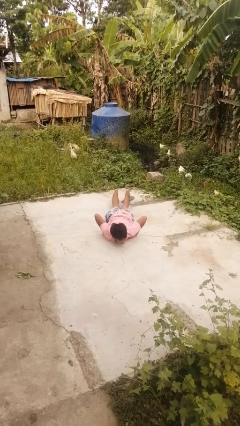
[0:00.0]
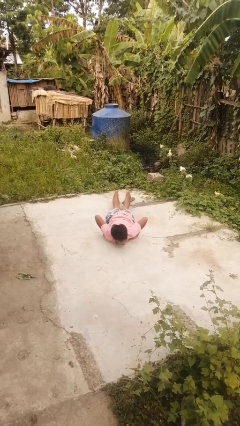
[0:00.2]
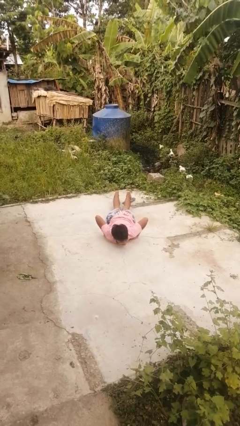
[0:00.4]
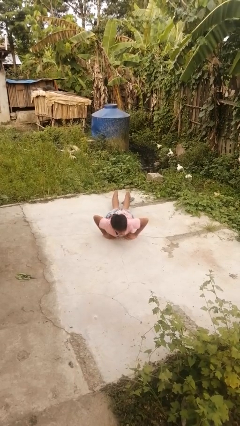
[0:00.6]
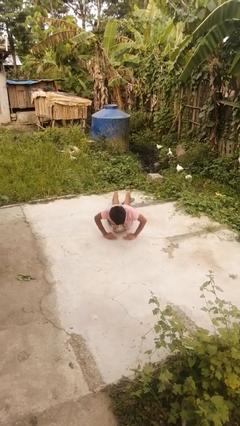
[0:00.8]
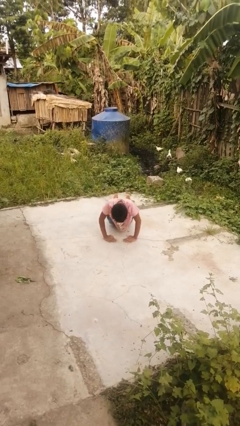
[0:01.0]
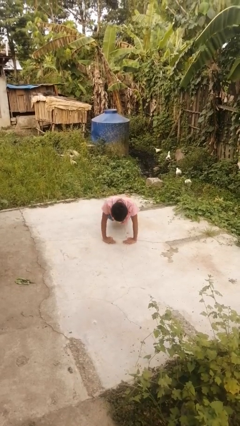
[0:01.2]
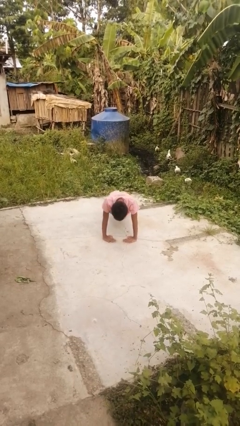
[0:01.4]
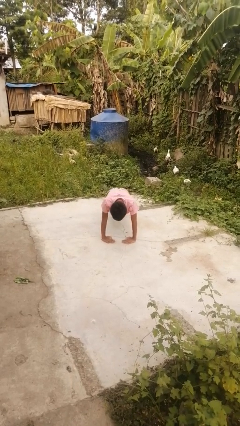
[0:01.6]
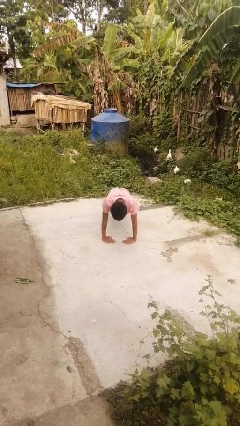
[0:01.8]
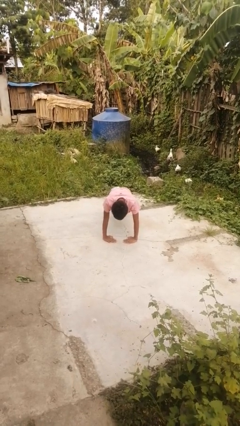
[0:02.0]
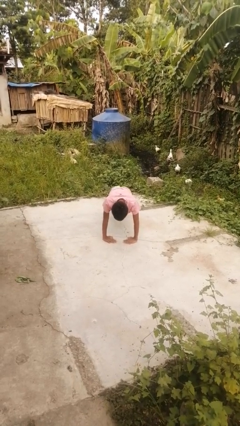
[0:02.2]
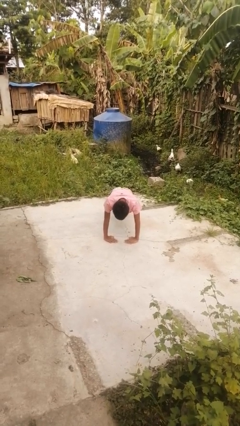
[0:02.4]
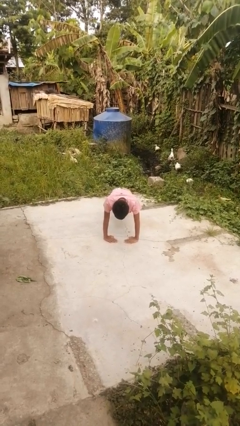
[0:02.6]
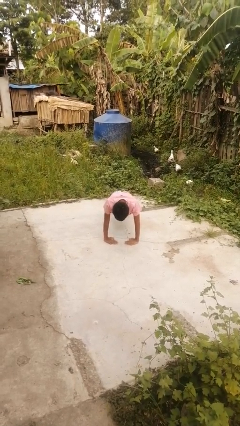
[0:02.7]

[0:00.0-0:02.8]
person exercises with pushup

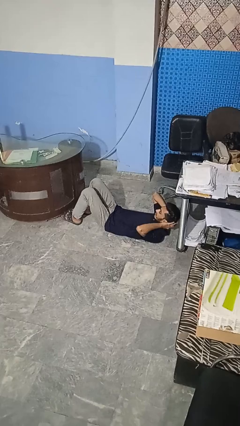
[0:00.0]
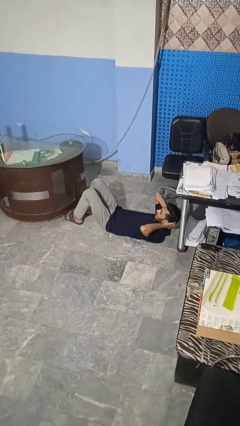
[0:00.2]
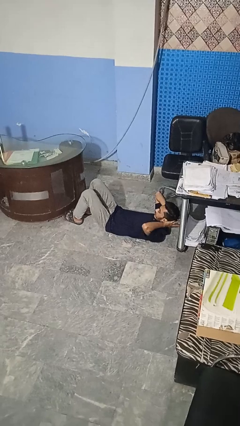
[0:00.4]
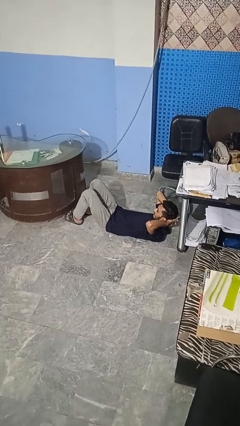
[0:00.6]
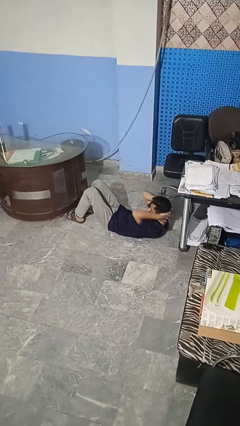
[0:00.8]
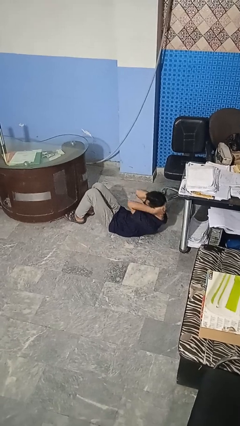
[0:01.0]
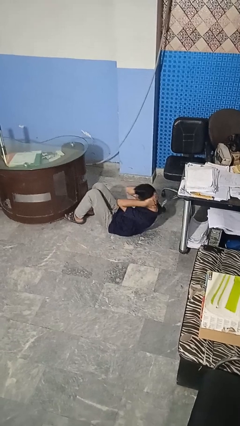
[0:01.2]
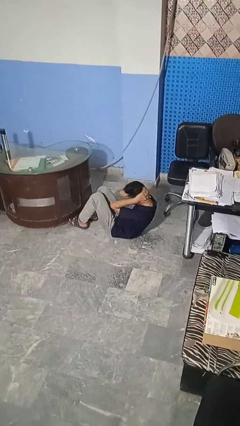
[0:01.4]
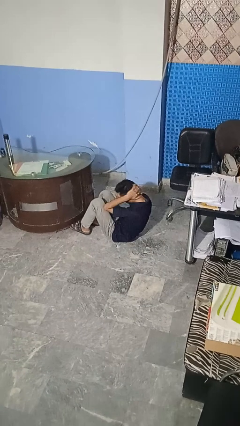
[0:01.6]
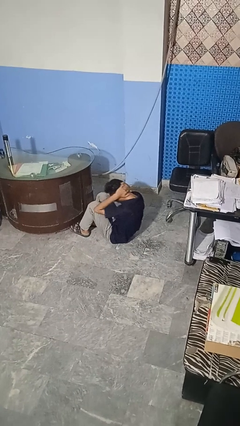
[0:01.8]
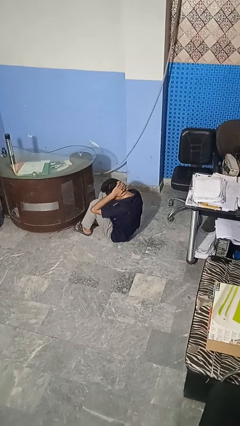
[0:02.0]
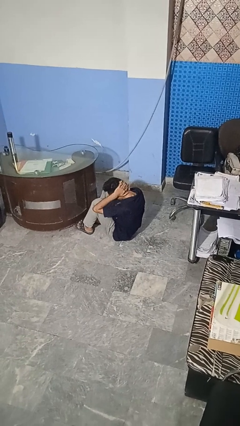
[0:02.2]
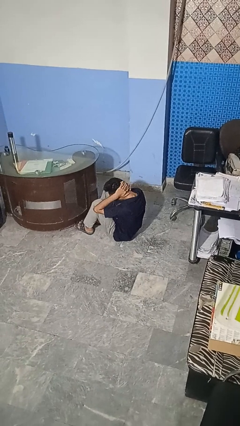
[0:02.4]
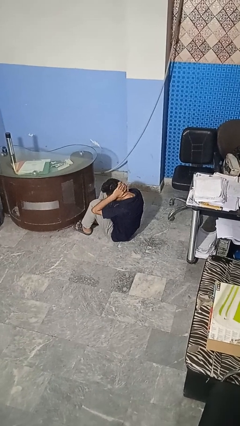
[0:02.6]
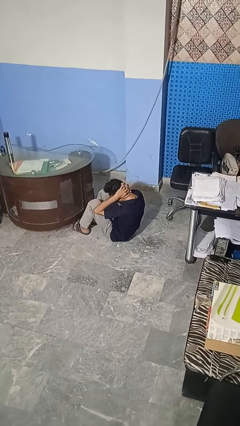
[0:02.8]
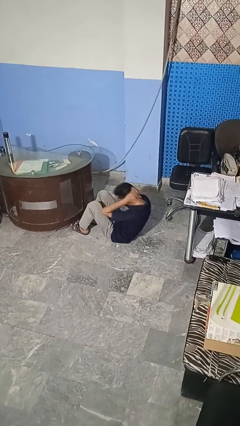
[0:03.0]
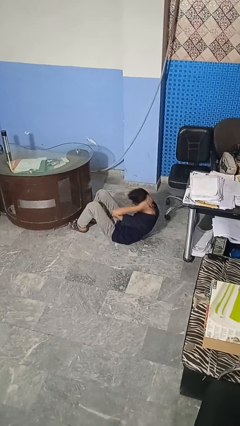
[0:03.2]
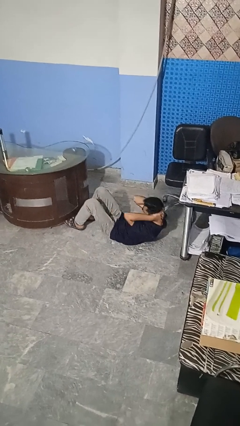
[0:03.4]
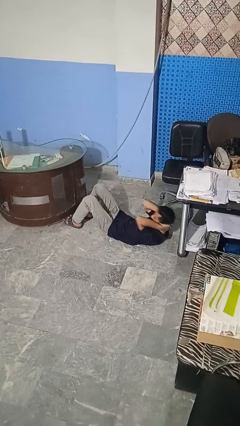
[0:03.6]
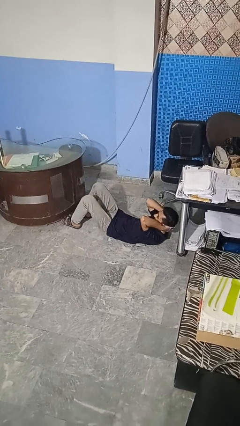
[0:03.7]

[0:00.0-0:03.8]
person exercises with situp

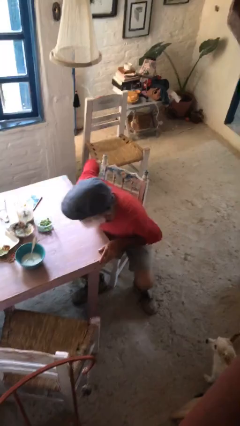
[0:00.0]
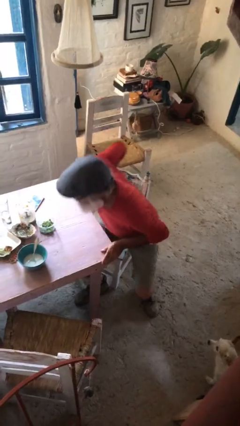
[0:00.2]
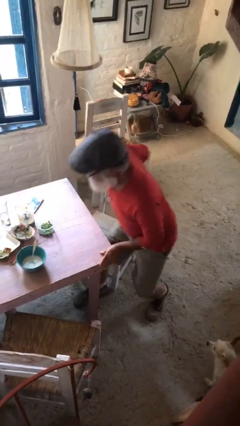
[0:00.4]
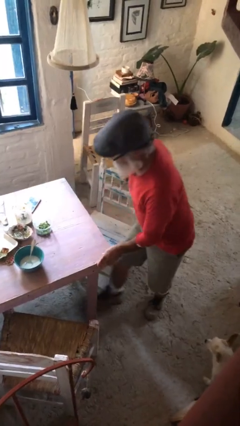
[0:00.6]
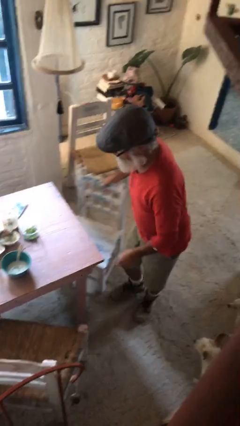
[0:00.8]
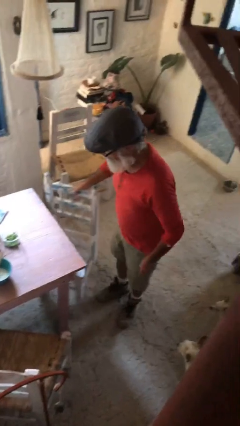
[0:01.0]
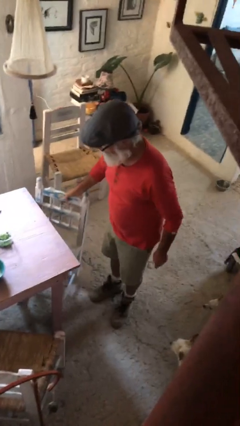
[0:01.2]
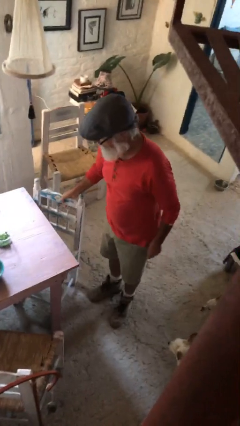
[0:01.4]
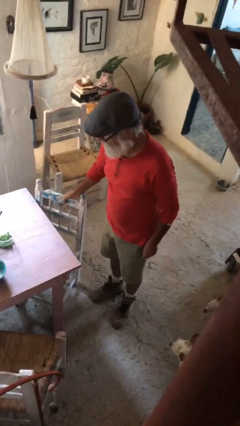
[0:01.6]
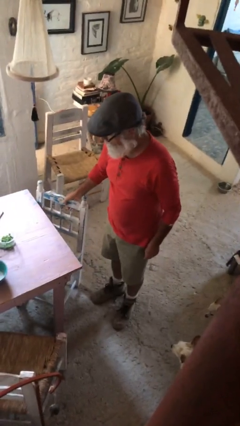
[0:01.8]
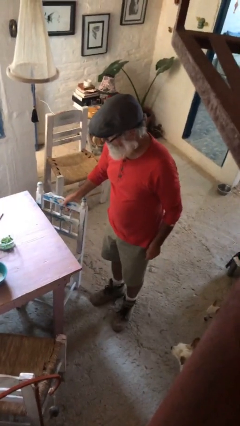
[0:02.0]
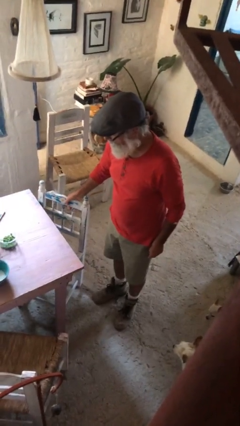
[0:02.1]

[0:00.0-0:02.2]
person stands up

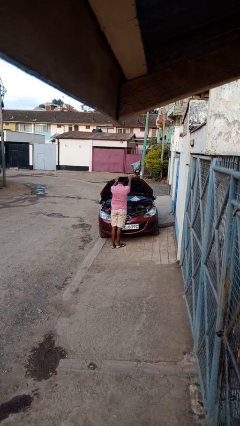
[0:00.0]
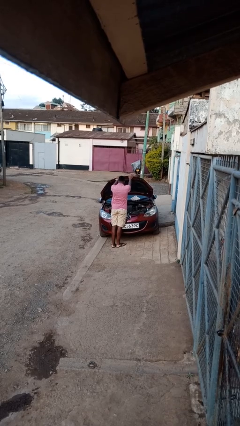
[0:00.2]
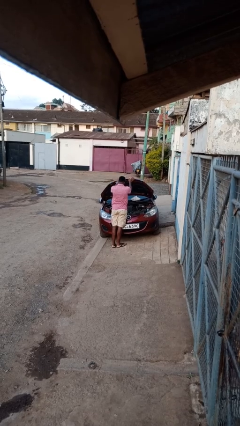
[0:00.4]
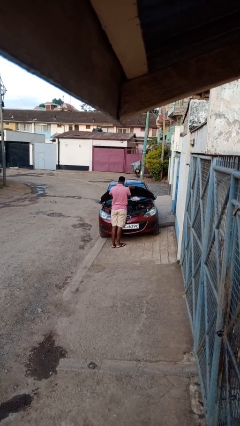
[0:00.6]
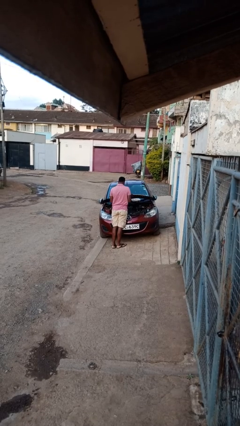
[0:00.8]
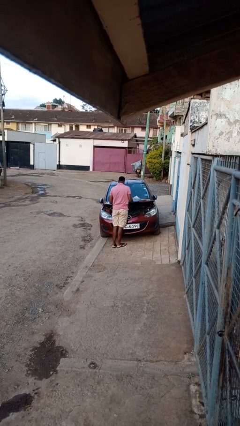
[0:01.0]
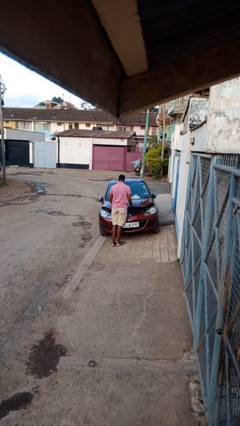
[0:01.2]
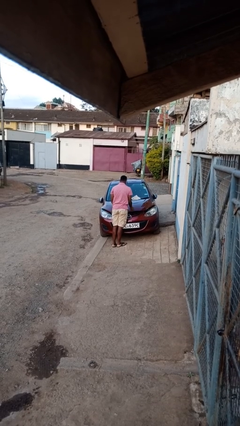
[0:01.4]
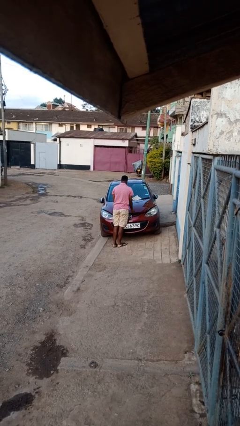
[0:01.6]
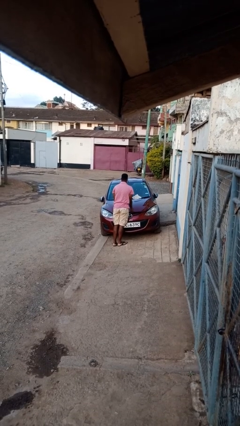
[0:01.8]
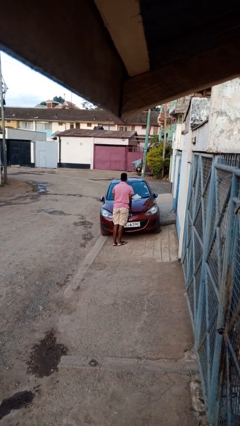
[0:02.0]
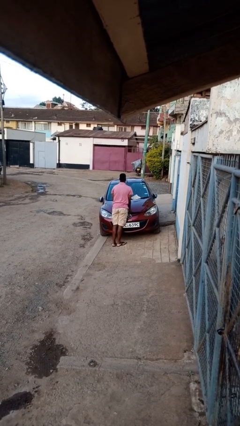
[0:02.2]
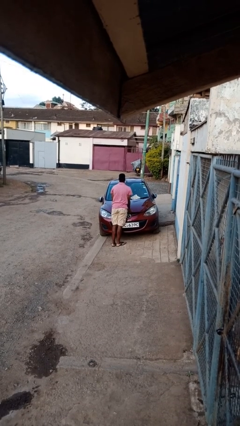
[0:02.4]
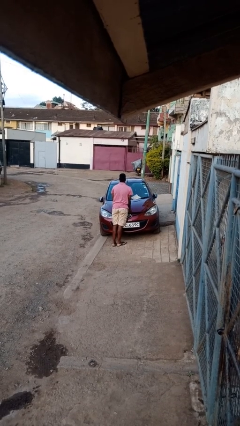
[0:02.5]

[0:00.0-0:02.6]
person closes car hood

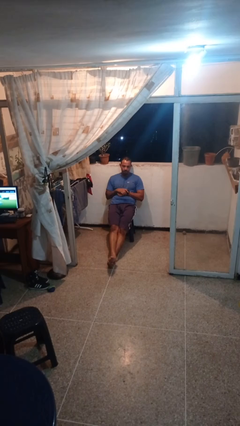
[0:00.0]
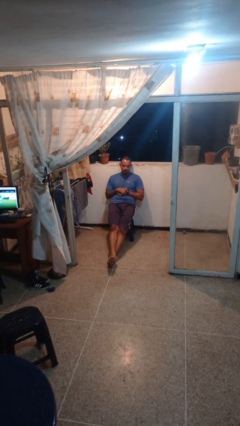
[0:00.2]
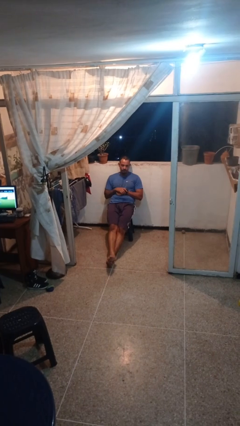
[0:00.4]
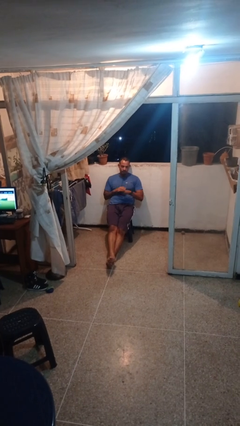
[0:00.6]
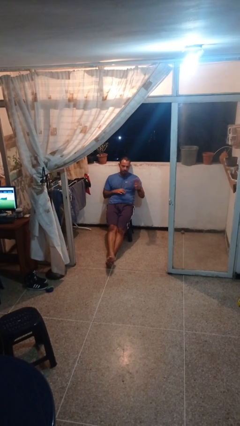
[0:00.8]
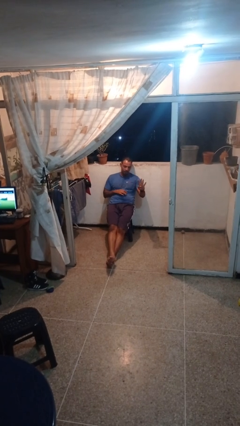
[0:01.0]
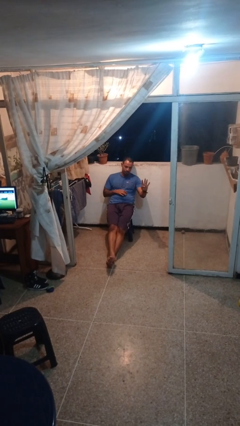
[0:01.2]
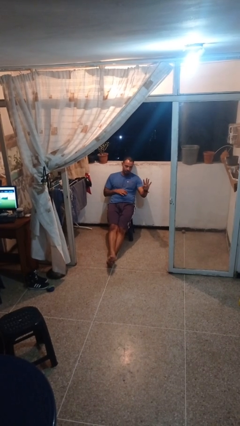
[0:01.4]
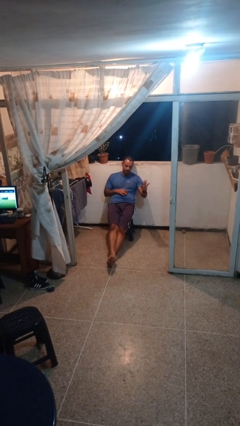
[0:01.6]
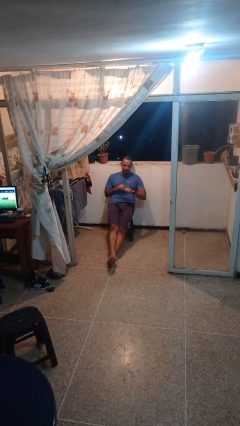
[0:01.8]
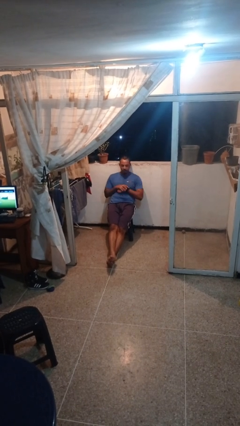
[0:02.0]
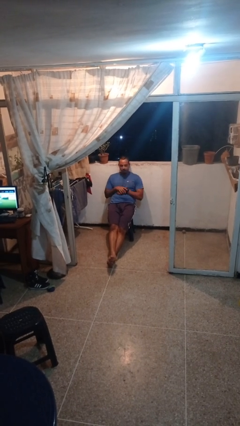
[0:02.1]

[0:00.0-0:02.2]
person gestures number four

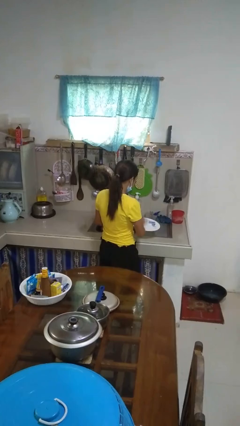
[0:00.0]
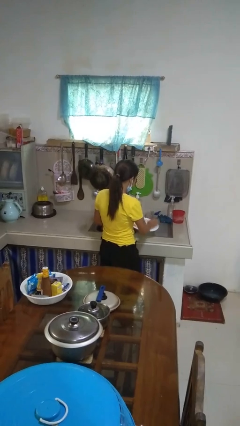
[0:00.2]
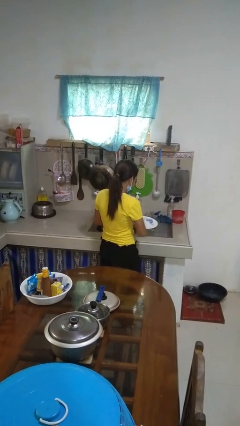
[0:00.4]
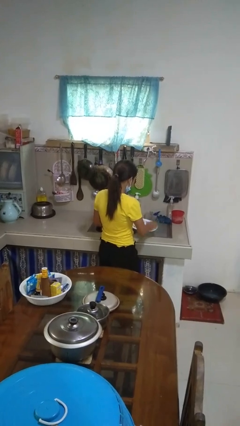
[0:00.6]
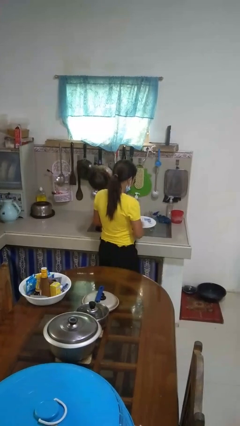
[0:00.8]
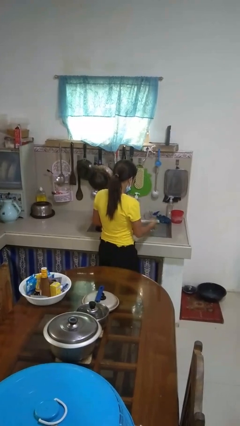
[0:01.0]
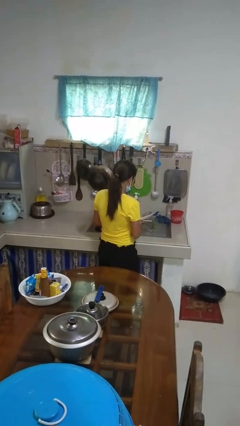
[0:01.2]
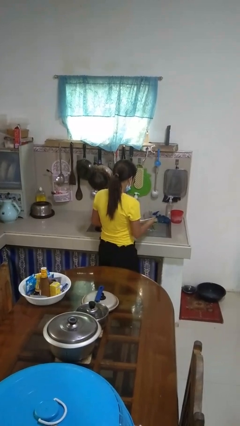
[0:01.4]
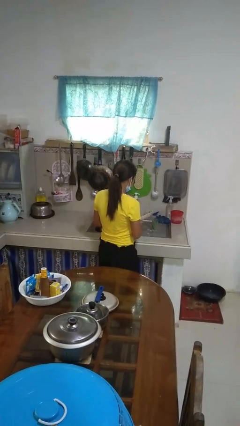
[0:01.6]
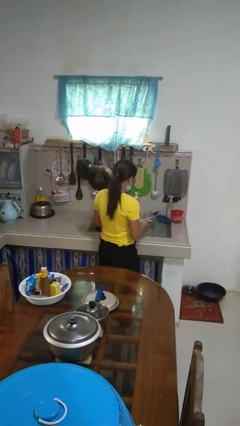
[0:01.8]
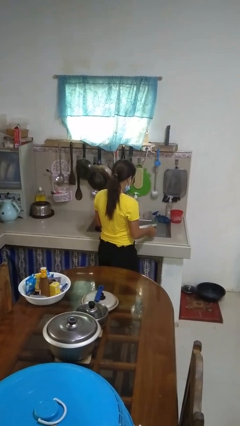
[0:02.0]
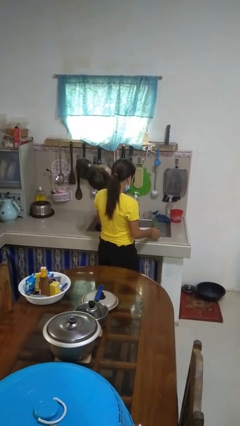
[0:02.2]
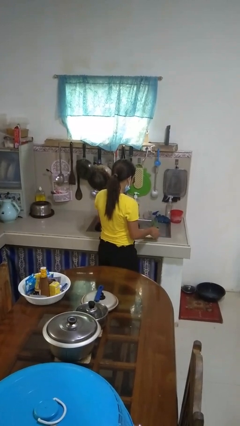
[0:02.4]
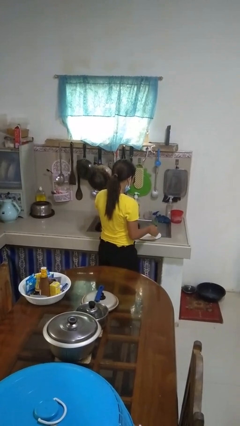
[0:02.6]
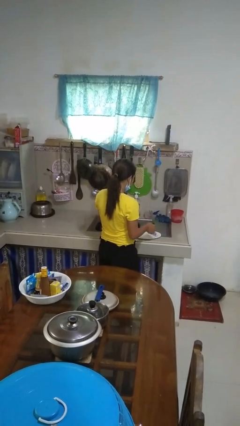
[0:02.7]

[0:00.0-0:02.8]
person washes dish

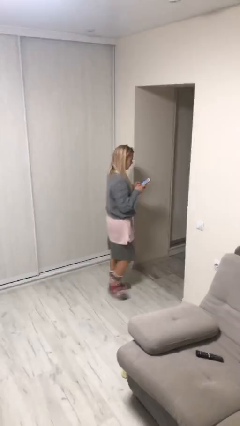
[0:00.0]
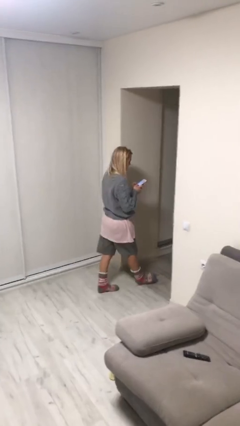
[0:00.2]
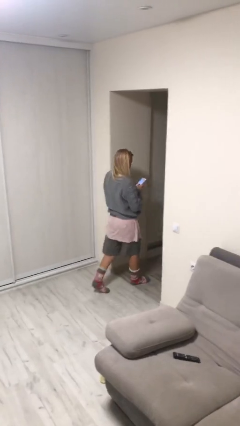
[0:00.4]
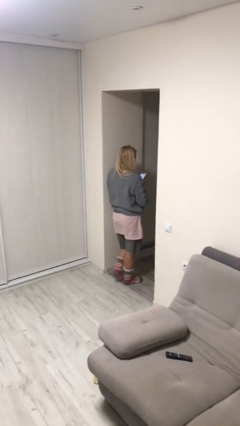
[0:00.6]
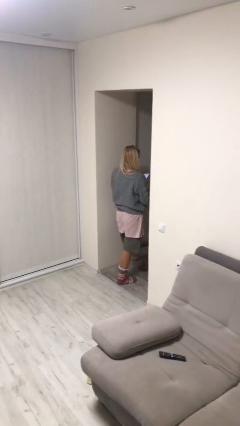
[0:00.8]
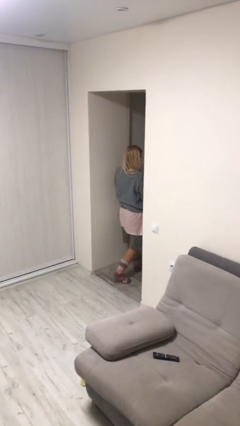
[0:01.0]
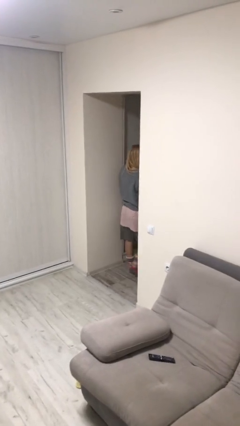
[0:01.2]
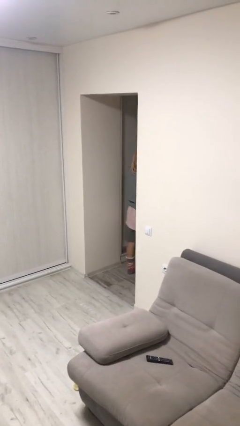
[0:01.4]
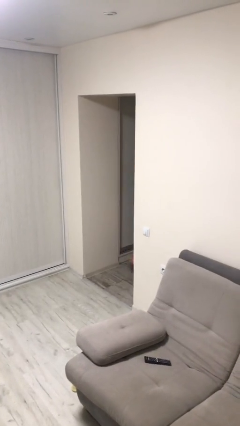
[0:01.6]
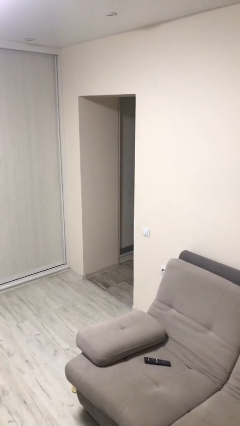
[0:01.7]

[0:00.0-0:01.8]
person exits scene through structure
